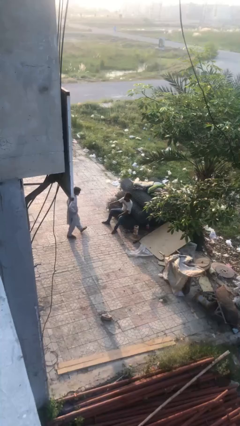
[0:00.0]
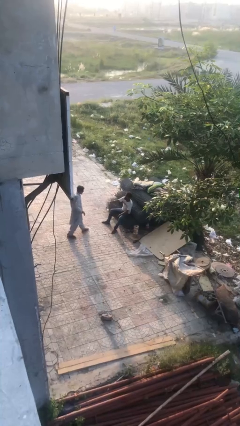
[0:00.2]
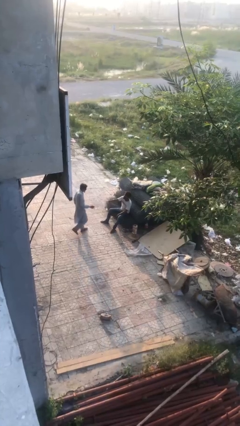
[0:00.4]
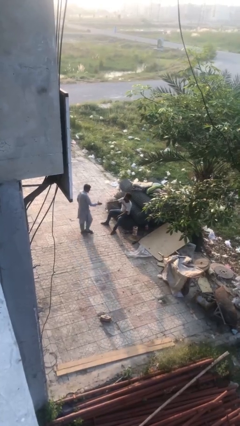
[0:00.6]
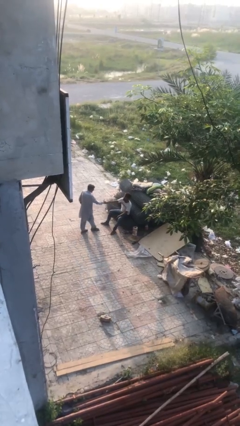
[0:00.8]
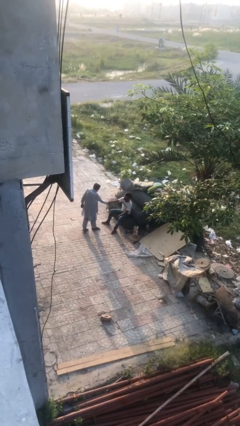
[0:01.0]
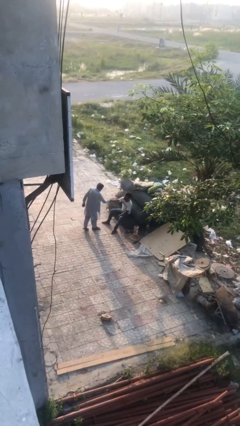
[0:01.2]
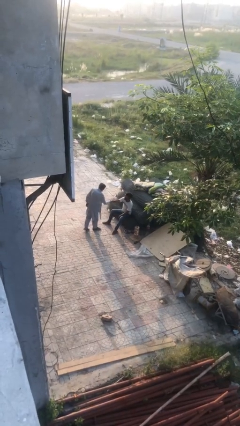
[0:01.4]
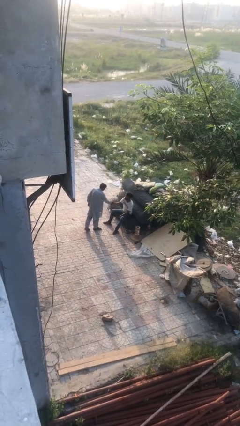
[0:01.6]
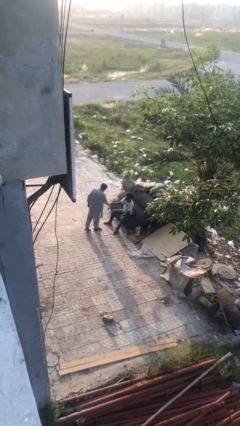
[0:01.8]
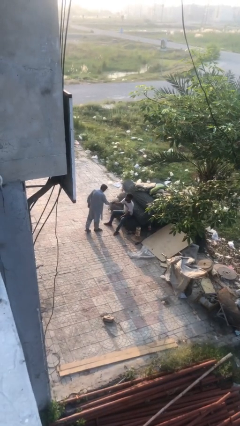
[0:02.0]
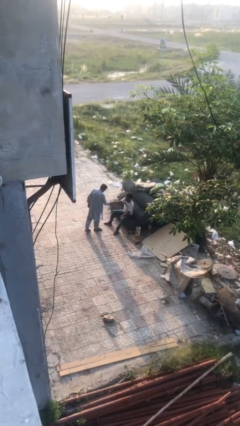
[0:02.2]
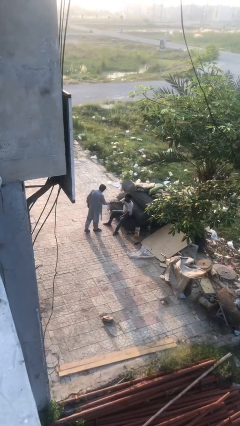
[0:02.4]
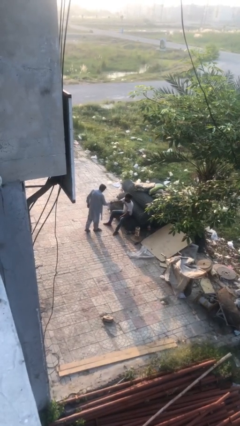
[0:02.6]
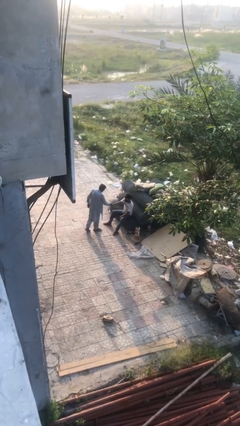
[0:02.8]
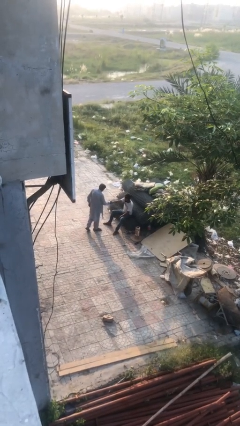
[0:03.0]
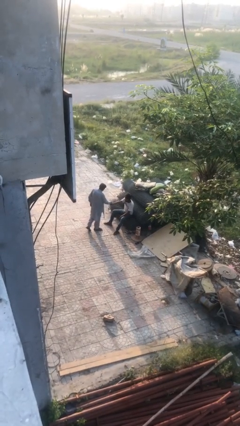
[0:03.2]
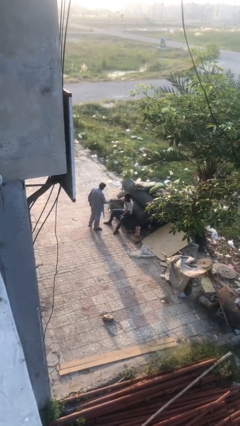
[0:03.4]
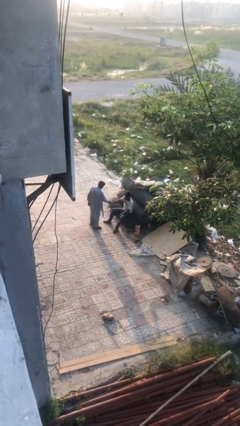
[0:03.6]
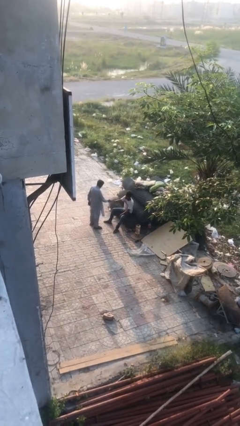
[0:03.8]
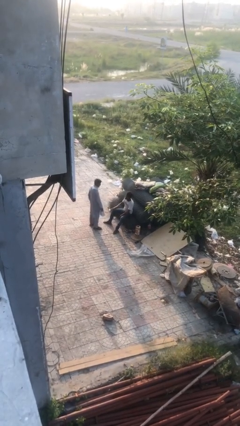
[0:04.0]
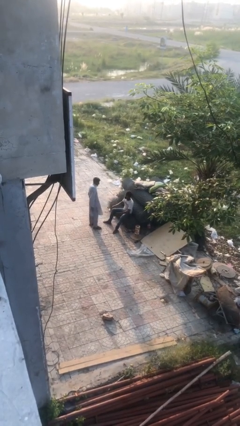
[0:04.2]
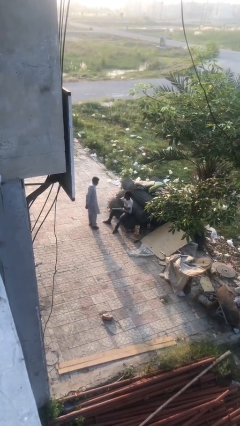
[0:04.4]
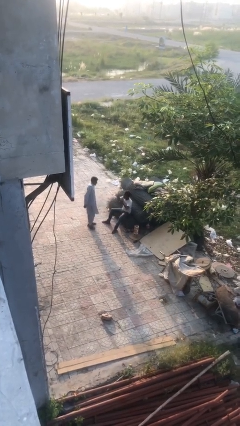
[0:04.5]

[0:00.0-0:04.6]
person shakes hand

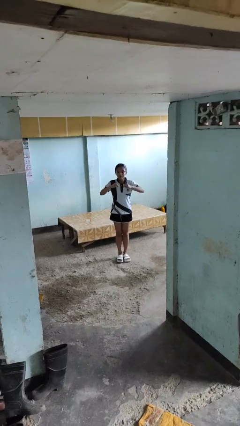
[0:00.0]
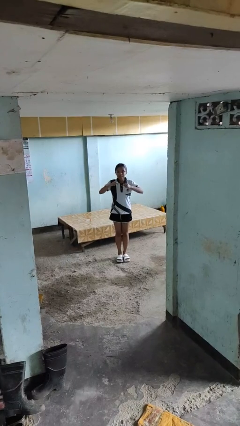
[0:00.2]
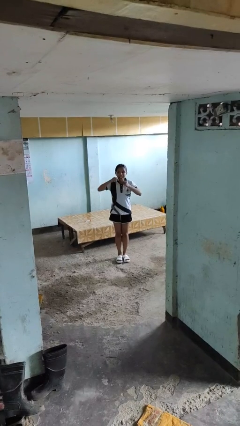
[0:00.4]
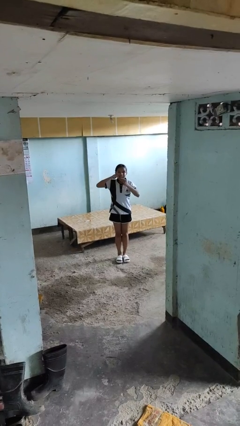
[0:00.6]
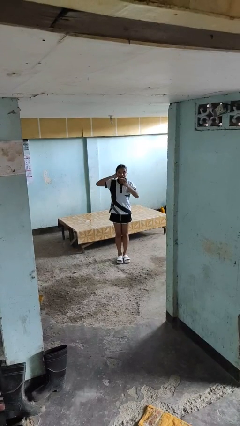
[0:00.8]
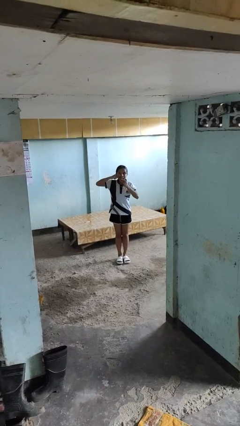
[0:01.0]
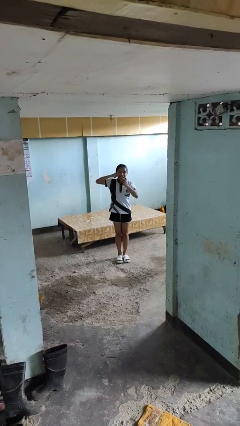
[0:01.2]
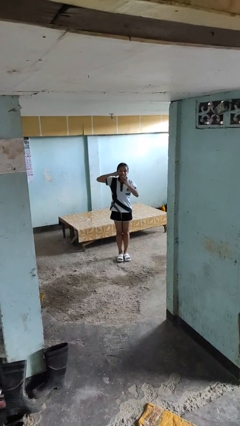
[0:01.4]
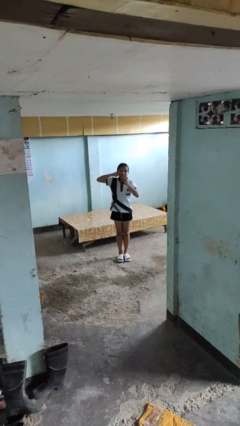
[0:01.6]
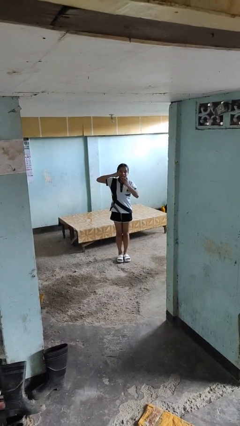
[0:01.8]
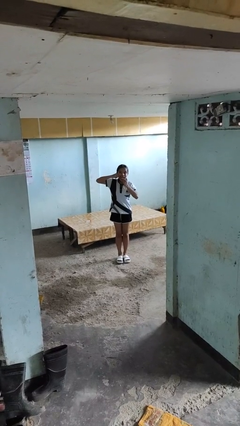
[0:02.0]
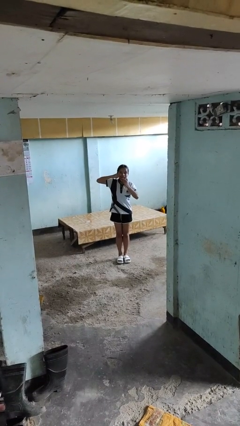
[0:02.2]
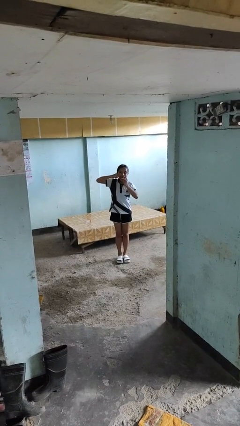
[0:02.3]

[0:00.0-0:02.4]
person flosses

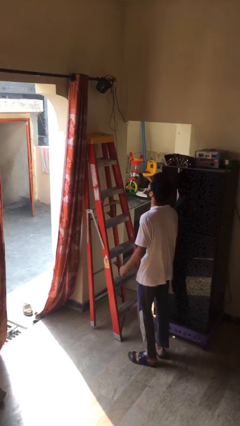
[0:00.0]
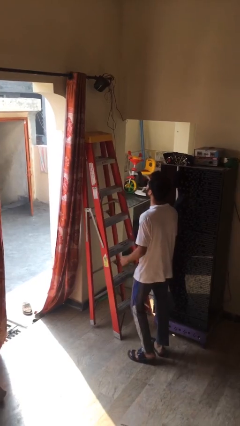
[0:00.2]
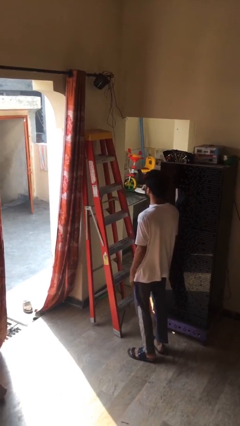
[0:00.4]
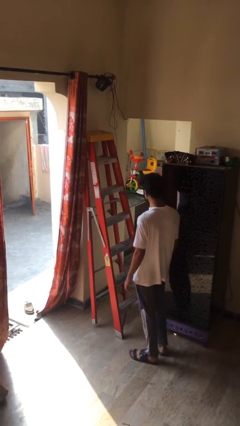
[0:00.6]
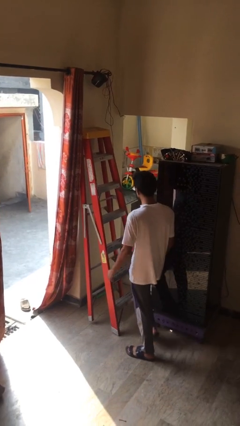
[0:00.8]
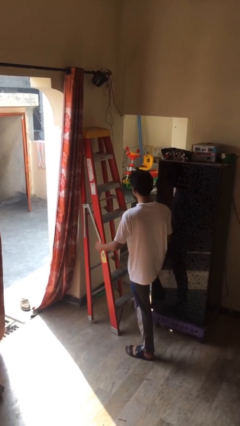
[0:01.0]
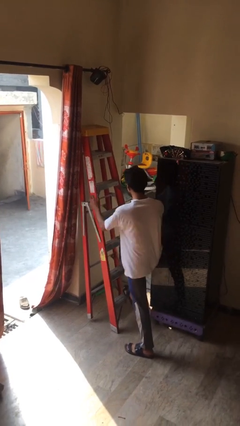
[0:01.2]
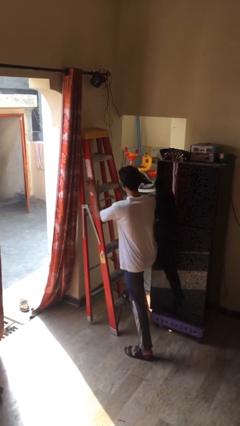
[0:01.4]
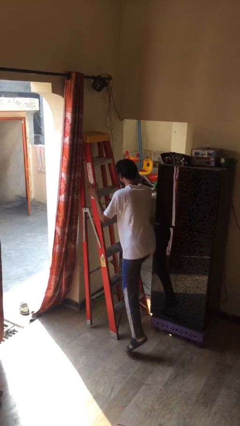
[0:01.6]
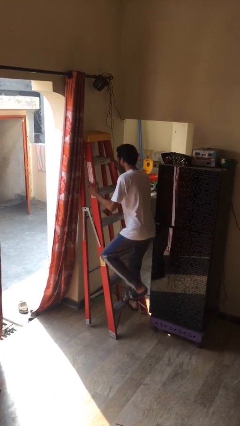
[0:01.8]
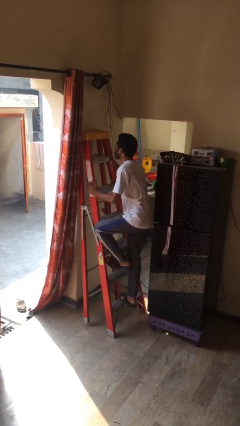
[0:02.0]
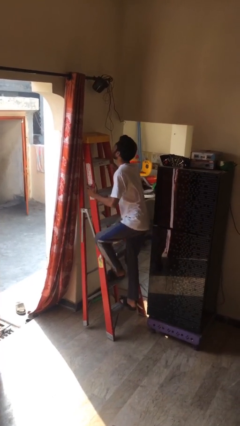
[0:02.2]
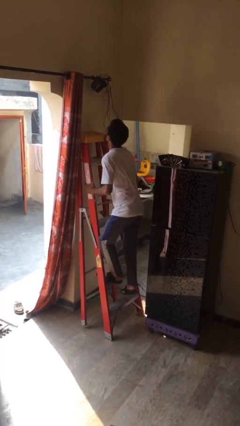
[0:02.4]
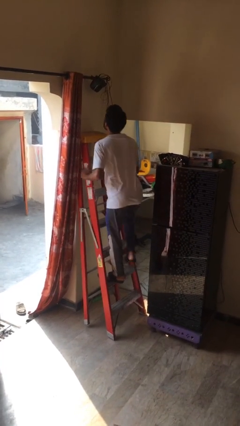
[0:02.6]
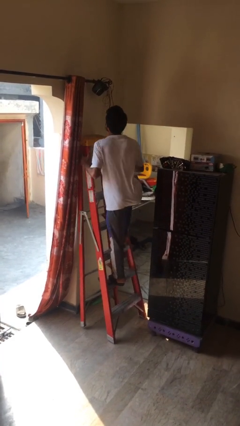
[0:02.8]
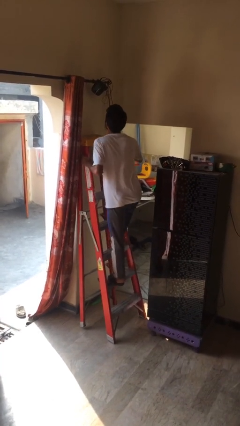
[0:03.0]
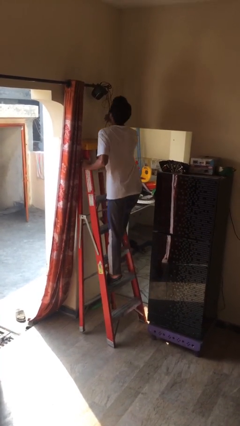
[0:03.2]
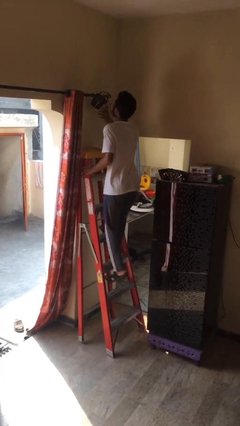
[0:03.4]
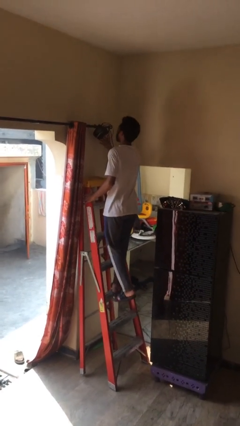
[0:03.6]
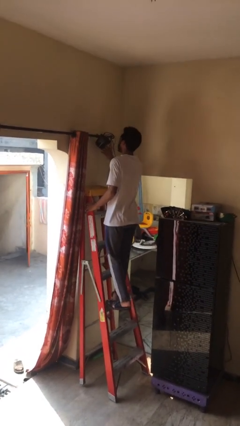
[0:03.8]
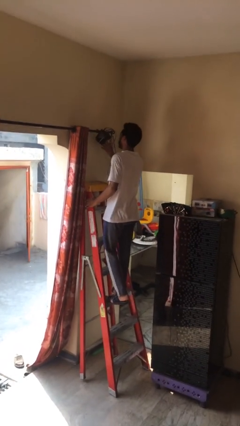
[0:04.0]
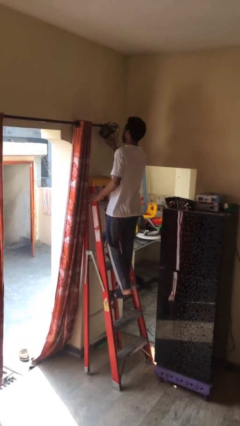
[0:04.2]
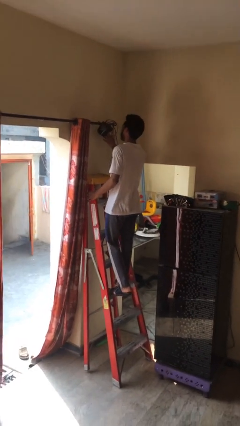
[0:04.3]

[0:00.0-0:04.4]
person climbs up ladder

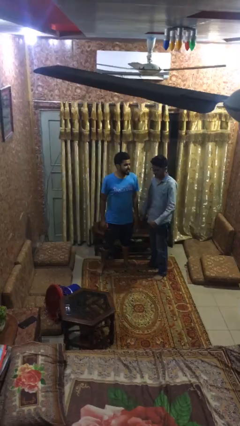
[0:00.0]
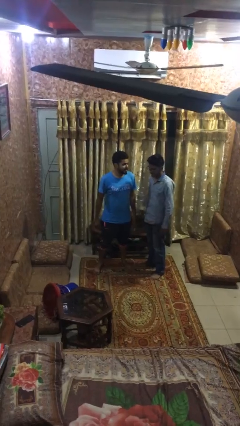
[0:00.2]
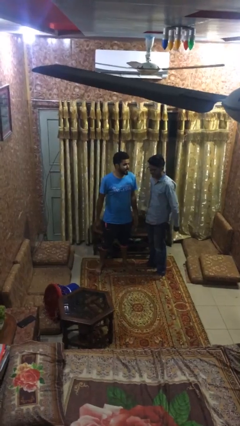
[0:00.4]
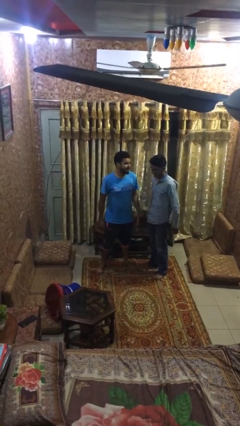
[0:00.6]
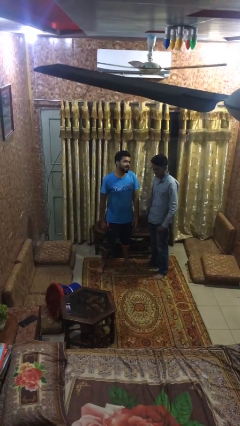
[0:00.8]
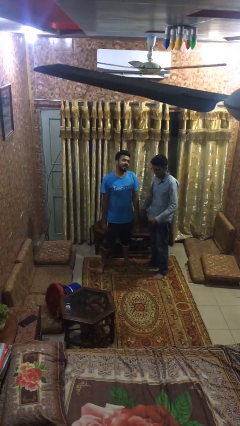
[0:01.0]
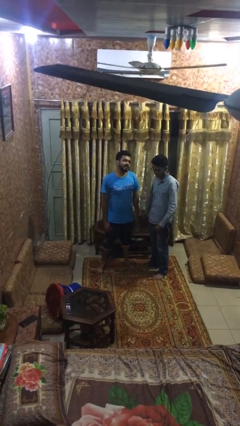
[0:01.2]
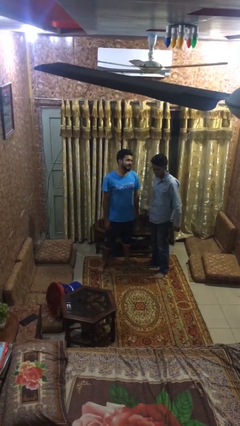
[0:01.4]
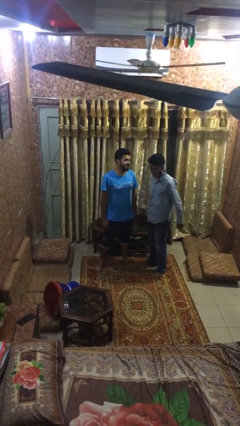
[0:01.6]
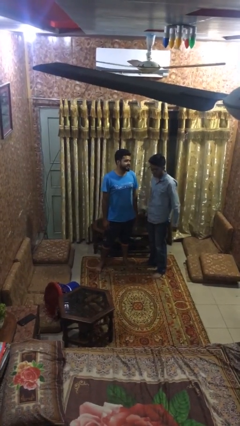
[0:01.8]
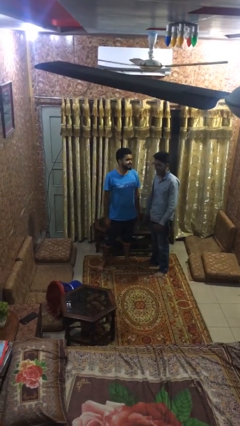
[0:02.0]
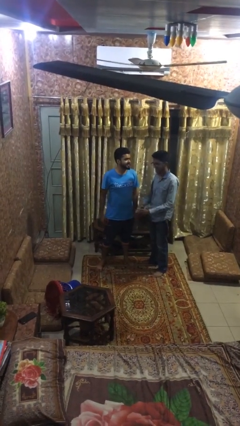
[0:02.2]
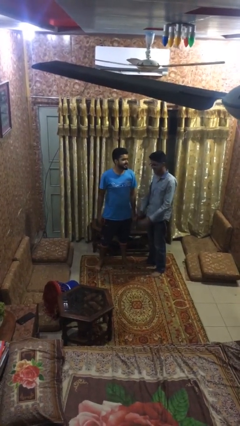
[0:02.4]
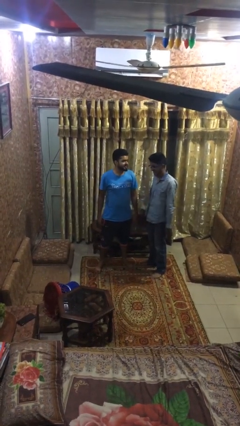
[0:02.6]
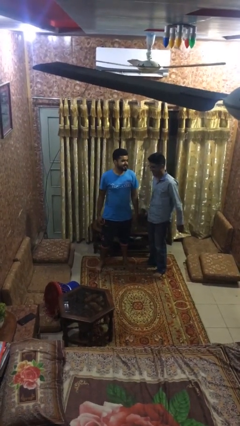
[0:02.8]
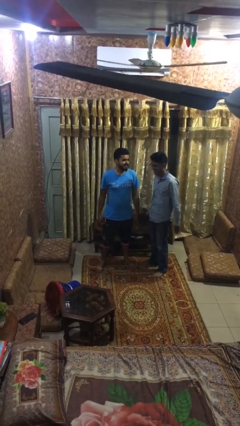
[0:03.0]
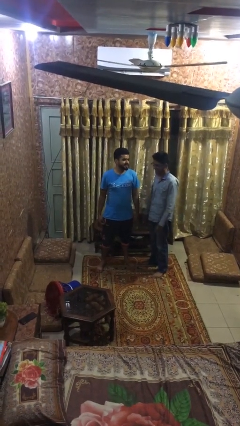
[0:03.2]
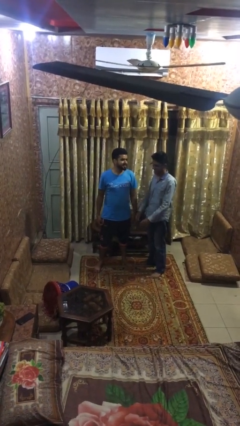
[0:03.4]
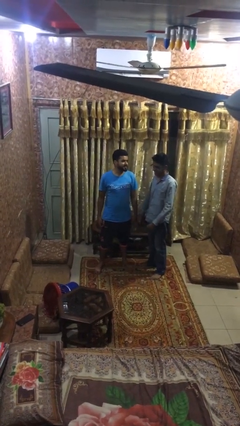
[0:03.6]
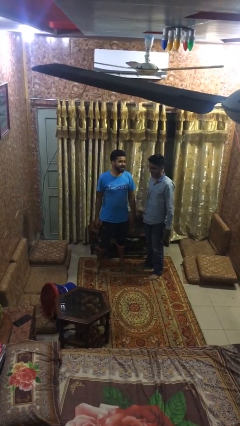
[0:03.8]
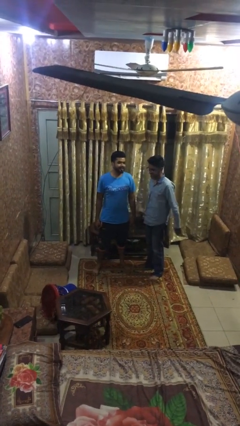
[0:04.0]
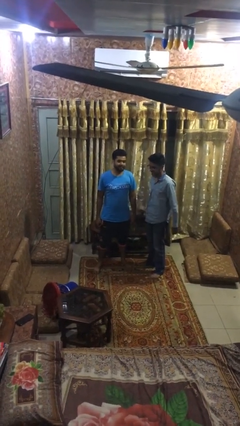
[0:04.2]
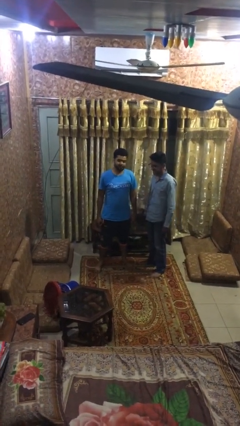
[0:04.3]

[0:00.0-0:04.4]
person talks to person

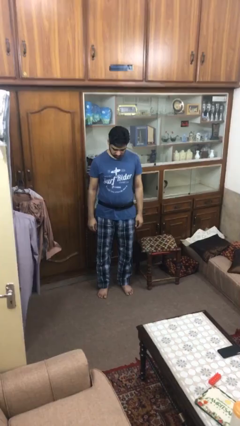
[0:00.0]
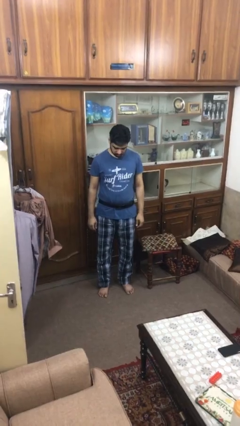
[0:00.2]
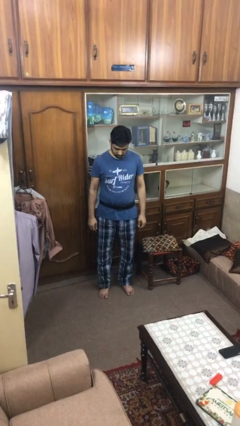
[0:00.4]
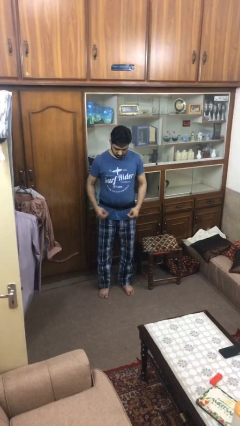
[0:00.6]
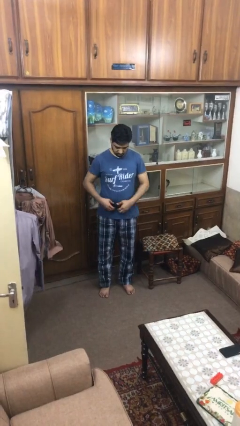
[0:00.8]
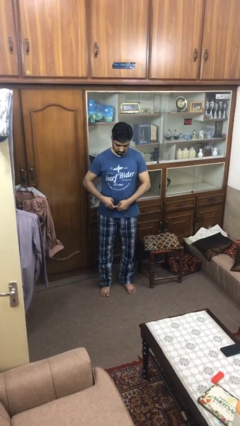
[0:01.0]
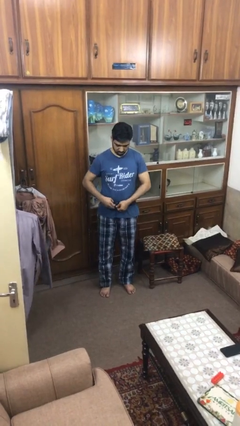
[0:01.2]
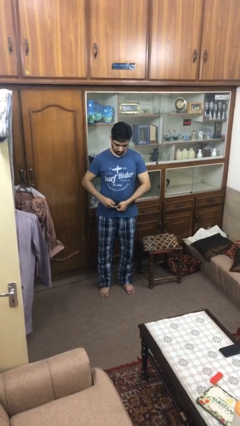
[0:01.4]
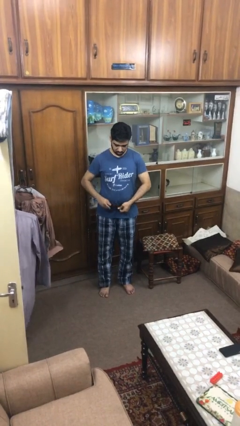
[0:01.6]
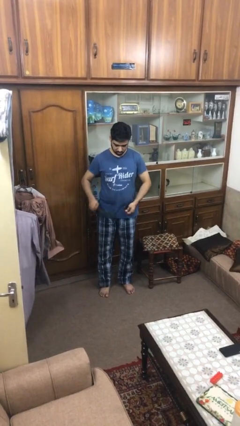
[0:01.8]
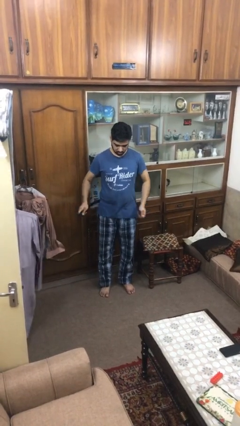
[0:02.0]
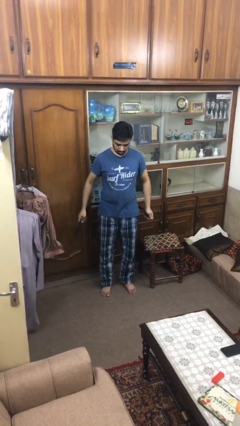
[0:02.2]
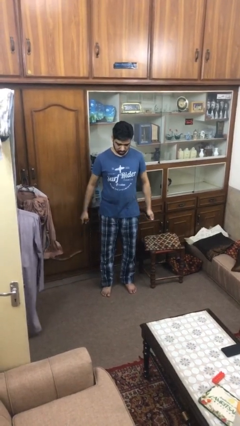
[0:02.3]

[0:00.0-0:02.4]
person takes off belt
